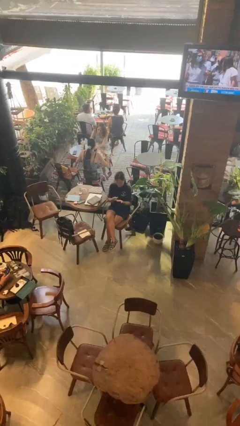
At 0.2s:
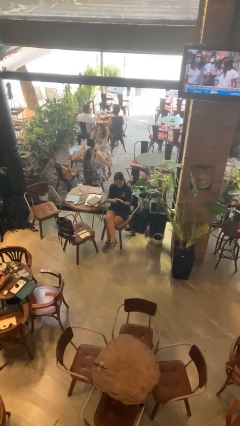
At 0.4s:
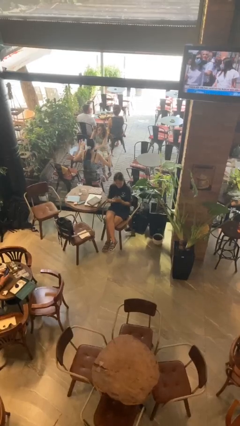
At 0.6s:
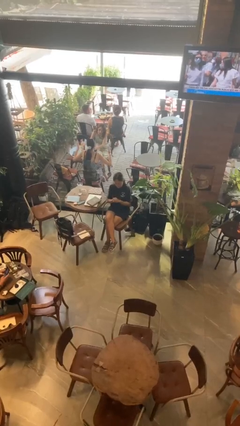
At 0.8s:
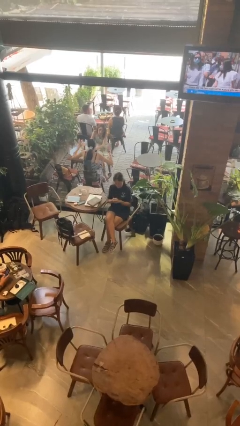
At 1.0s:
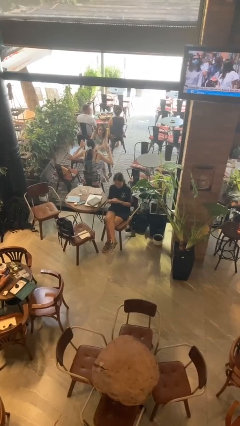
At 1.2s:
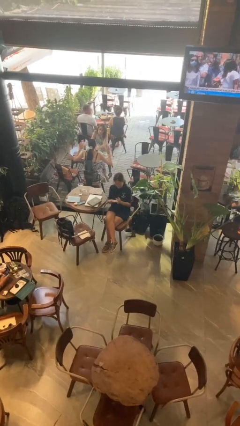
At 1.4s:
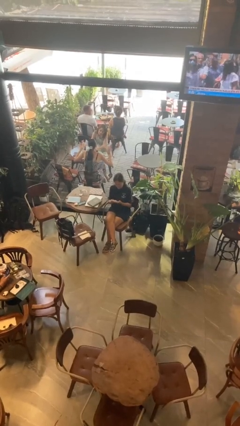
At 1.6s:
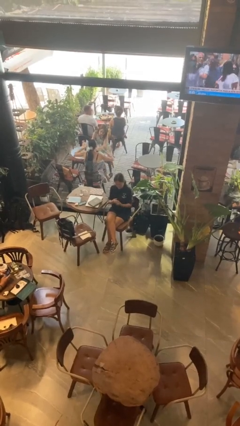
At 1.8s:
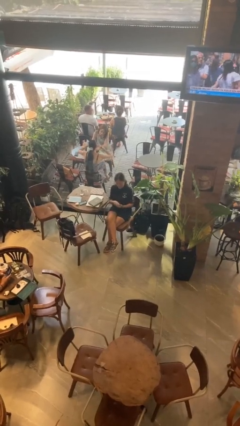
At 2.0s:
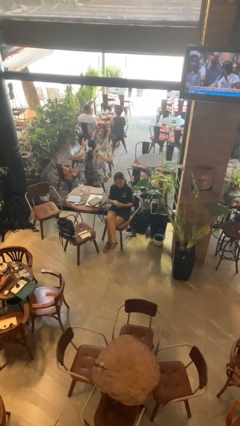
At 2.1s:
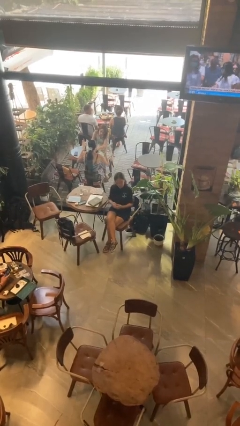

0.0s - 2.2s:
person looks at hands in lap

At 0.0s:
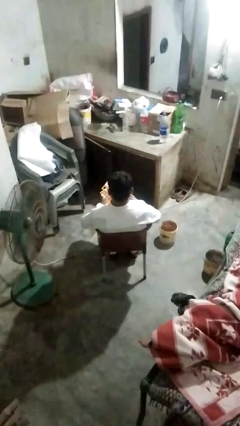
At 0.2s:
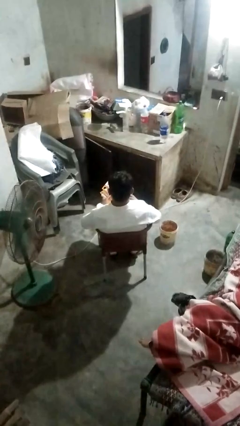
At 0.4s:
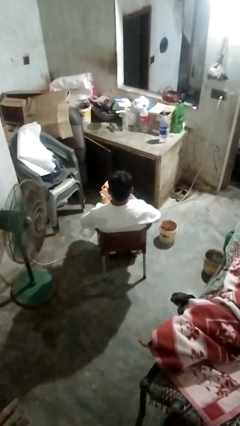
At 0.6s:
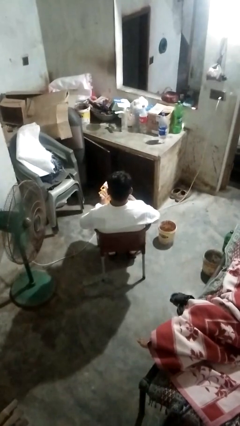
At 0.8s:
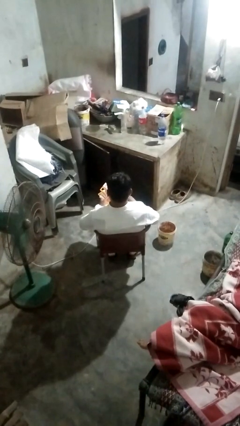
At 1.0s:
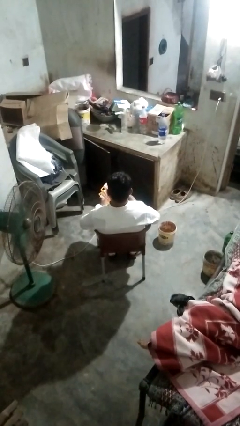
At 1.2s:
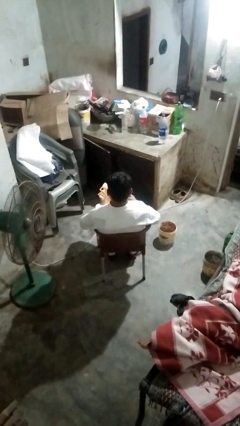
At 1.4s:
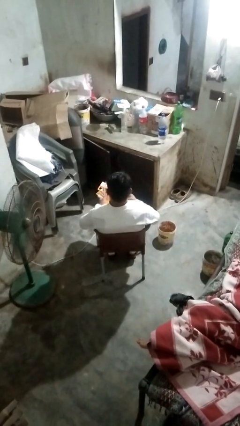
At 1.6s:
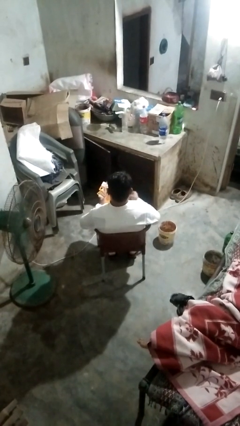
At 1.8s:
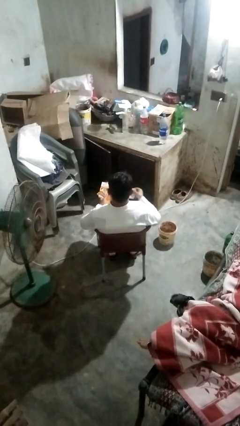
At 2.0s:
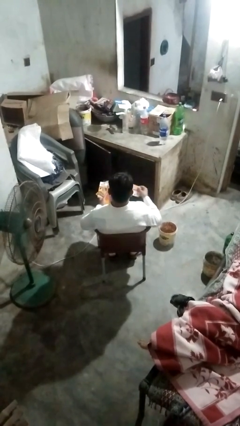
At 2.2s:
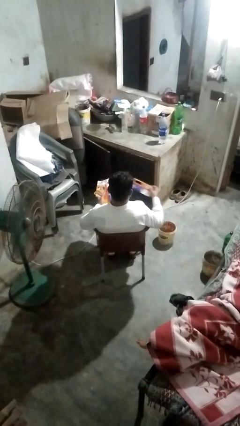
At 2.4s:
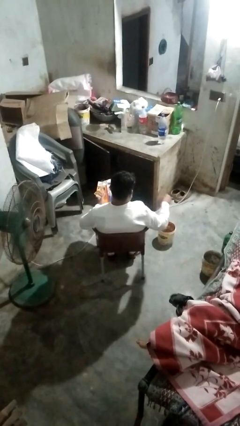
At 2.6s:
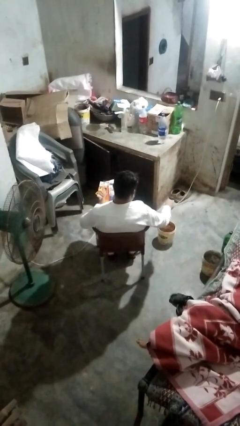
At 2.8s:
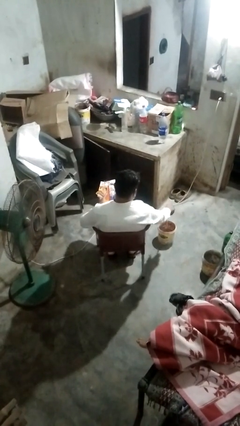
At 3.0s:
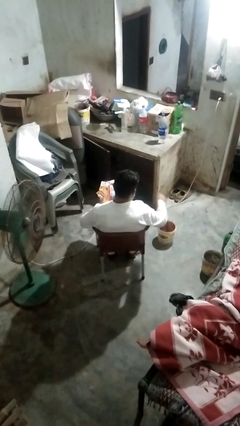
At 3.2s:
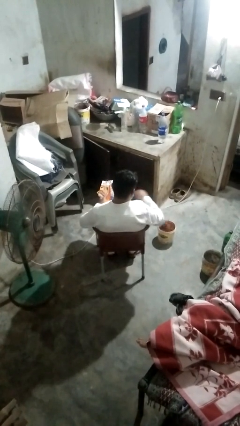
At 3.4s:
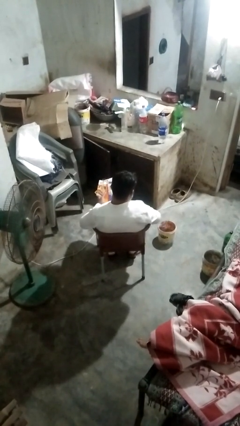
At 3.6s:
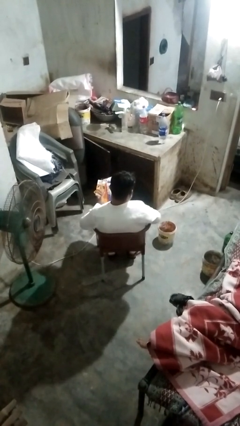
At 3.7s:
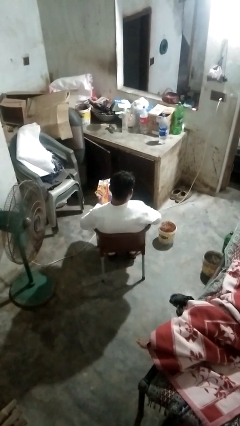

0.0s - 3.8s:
person discards trash

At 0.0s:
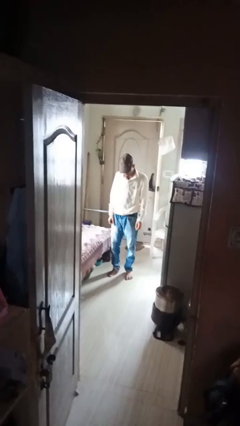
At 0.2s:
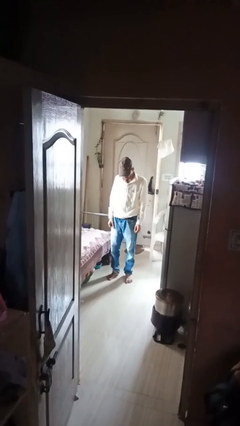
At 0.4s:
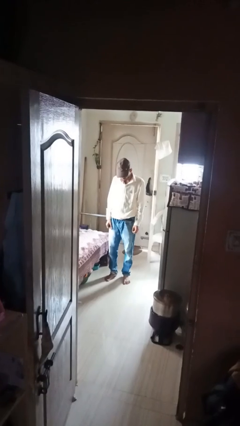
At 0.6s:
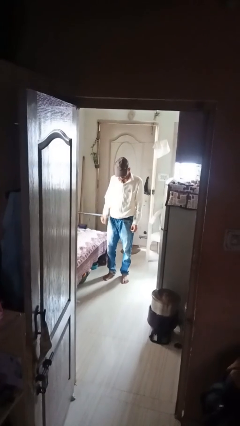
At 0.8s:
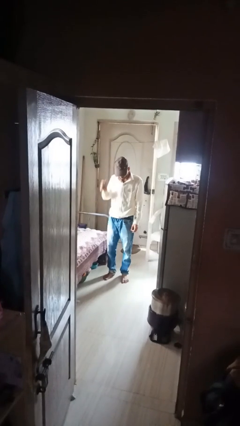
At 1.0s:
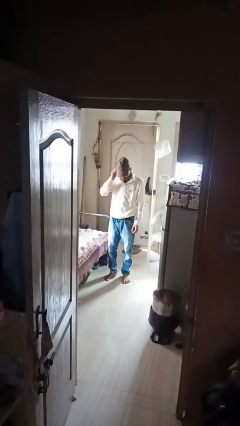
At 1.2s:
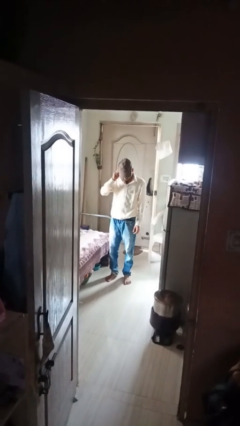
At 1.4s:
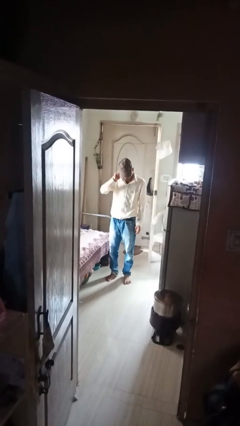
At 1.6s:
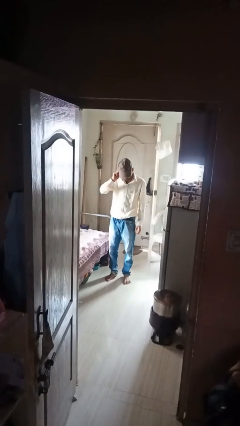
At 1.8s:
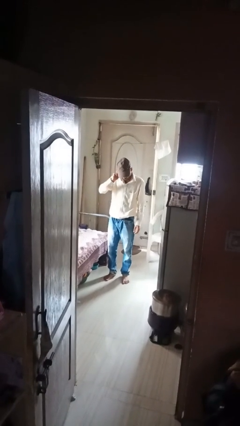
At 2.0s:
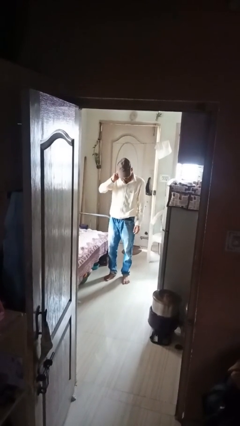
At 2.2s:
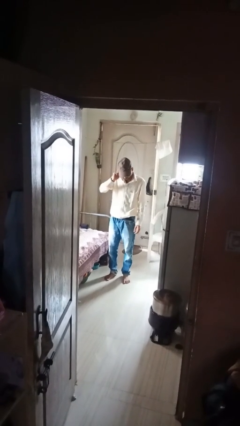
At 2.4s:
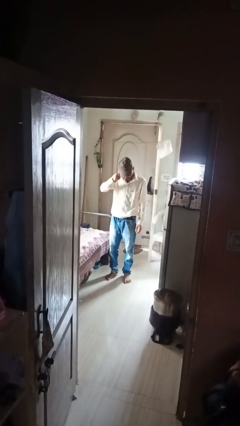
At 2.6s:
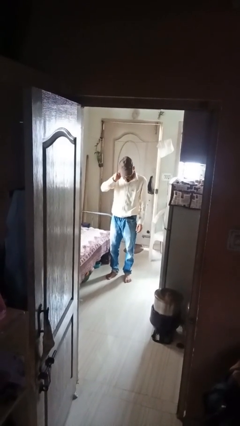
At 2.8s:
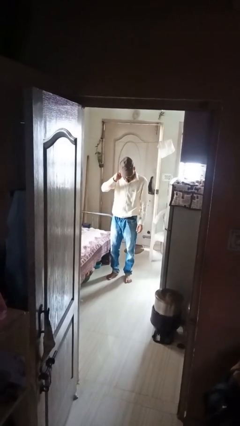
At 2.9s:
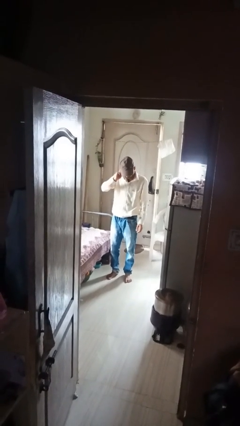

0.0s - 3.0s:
person touches earlobe

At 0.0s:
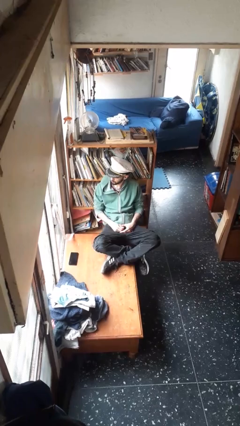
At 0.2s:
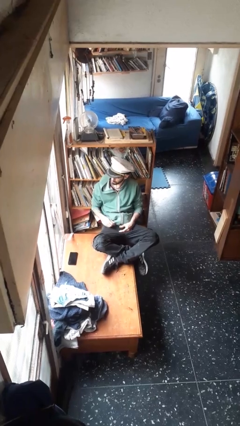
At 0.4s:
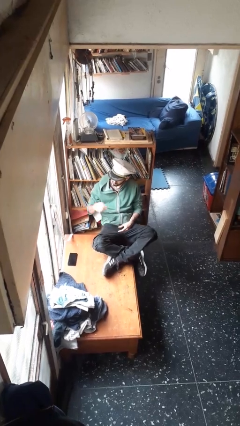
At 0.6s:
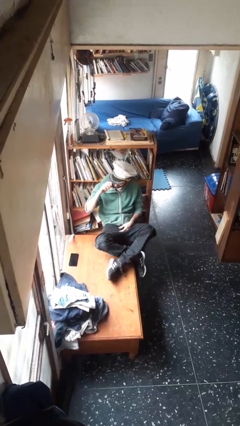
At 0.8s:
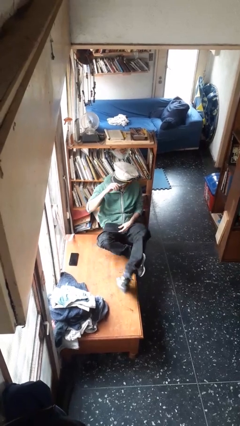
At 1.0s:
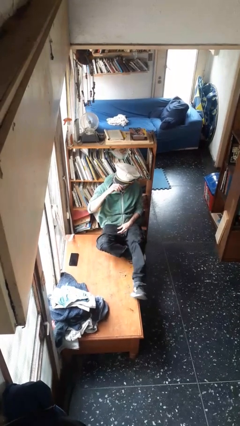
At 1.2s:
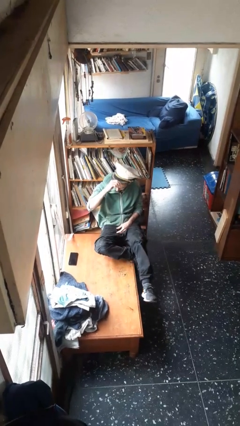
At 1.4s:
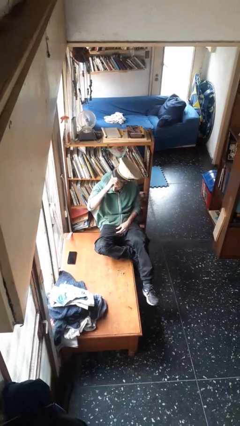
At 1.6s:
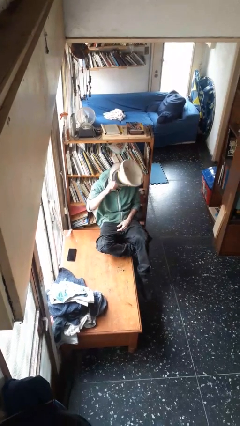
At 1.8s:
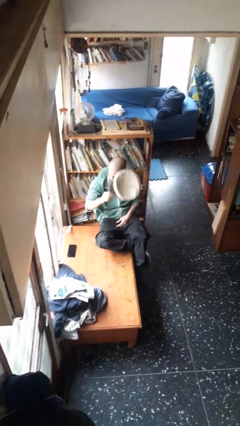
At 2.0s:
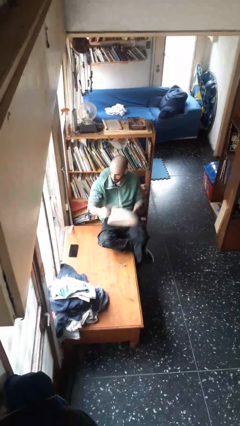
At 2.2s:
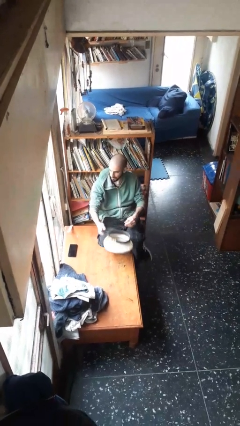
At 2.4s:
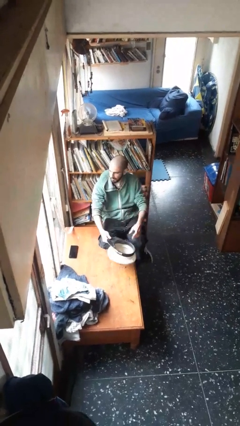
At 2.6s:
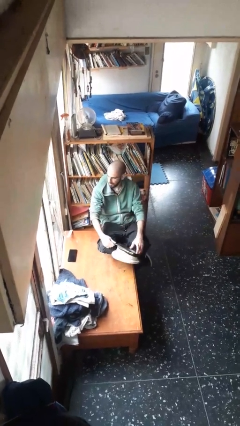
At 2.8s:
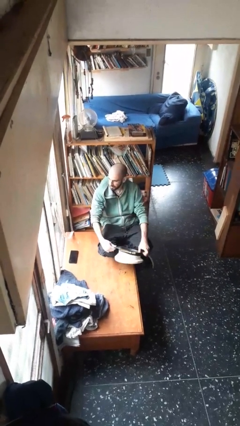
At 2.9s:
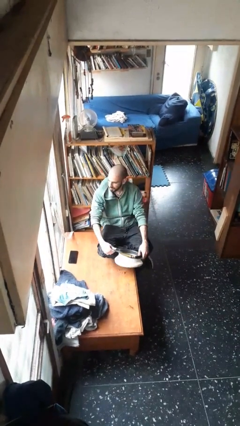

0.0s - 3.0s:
person takes off hat

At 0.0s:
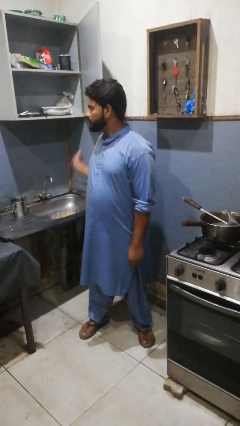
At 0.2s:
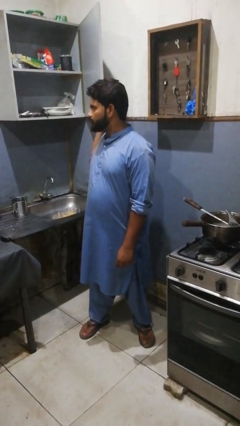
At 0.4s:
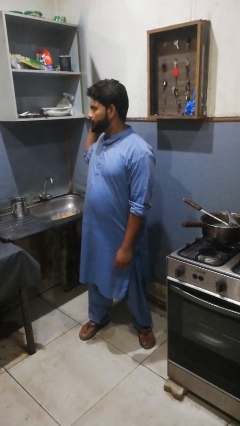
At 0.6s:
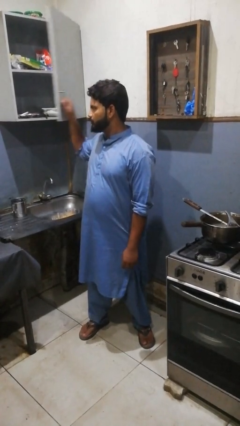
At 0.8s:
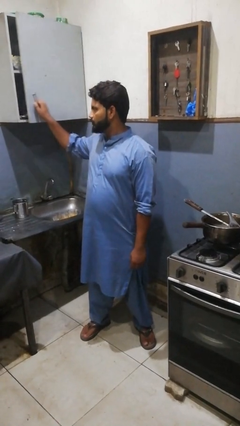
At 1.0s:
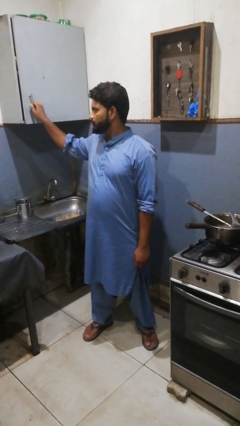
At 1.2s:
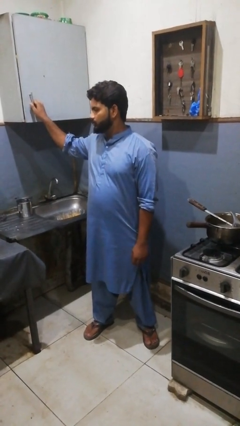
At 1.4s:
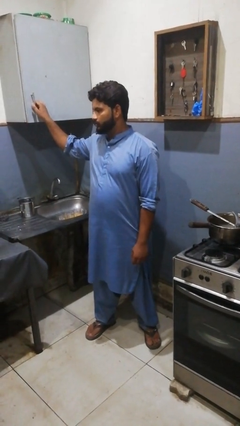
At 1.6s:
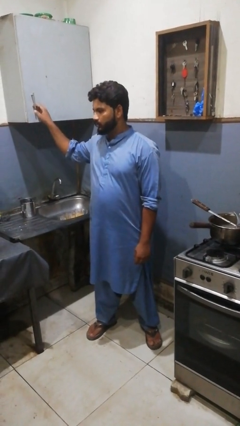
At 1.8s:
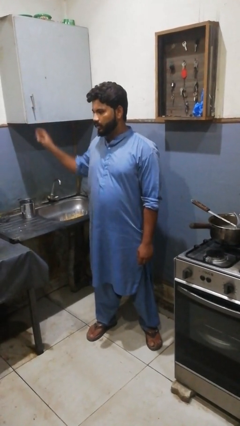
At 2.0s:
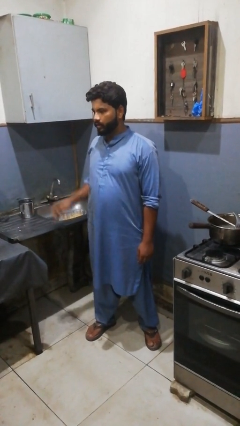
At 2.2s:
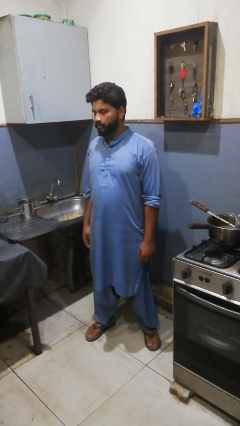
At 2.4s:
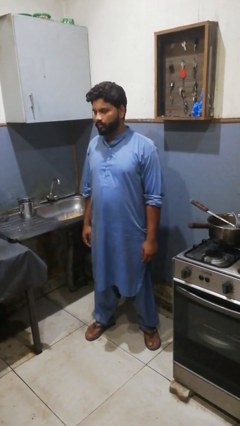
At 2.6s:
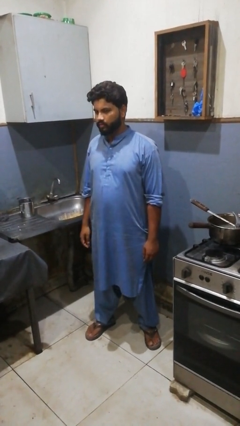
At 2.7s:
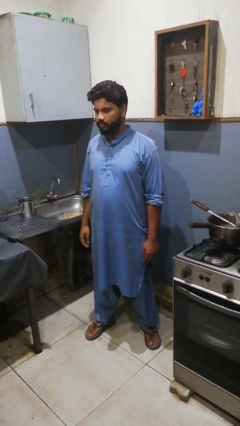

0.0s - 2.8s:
person closes kitchen drawer

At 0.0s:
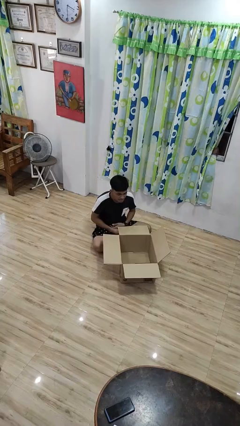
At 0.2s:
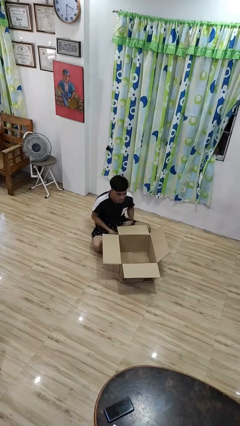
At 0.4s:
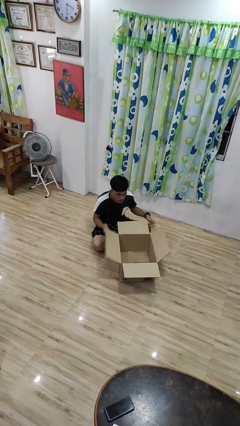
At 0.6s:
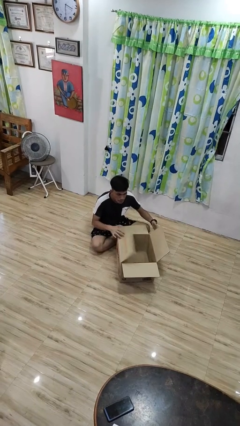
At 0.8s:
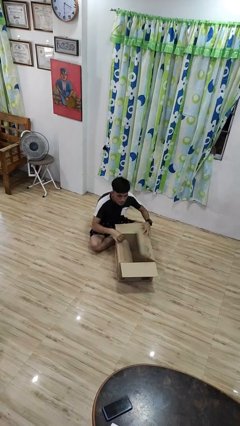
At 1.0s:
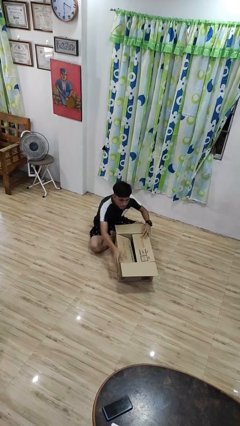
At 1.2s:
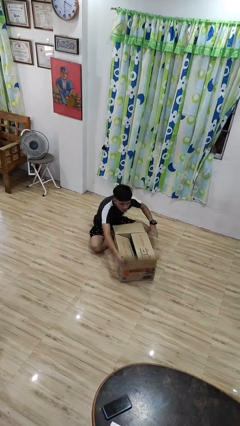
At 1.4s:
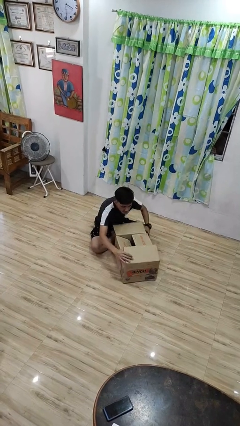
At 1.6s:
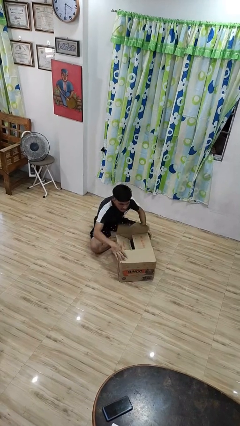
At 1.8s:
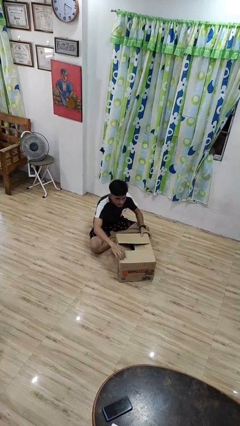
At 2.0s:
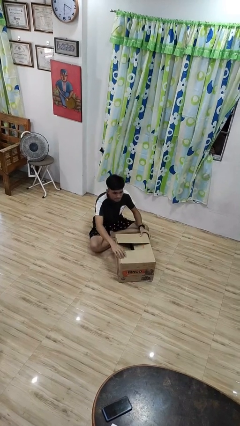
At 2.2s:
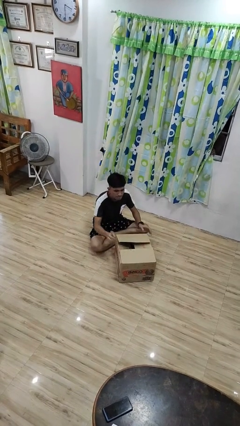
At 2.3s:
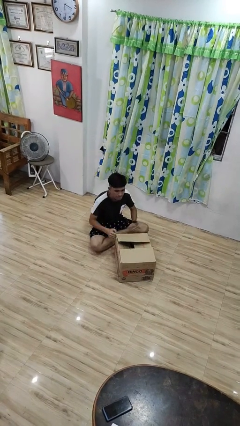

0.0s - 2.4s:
person closes box
